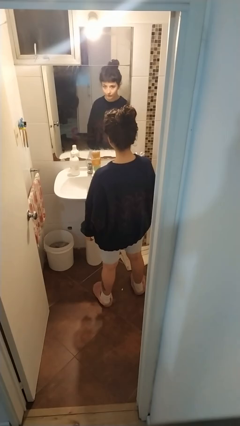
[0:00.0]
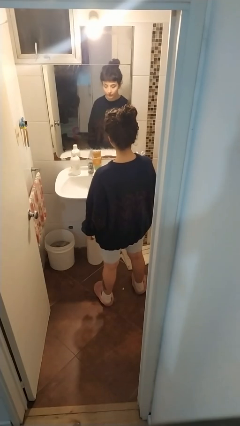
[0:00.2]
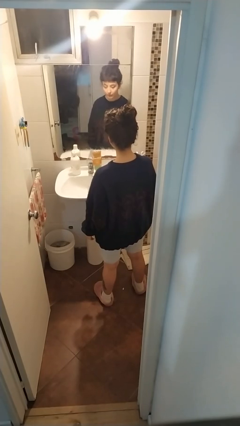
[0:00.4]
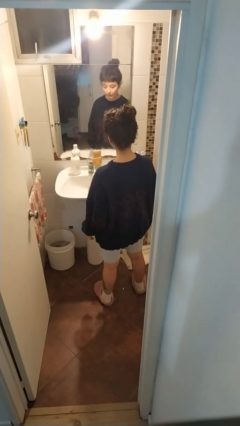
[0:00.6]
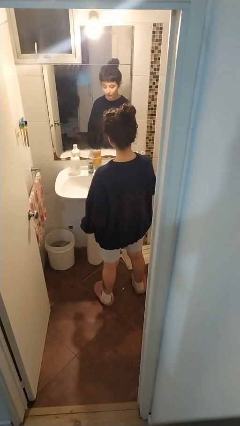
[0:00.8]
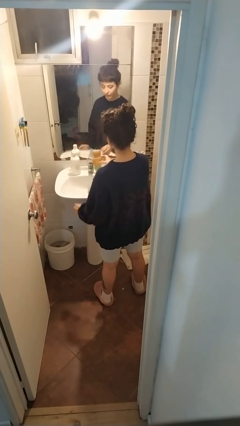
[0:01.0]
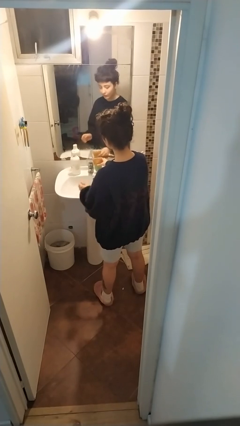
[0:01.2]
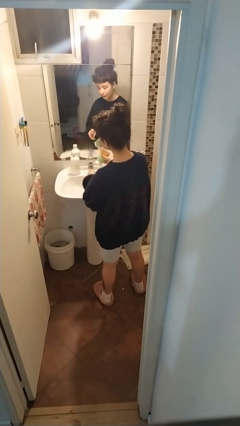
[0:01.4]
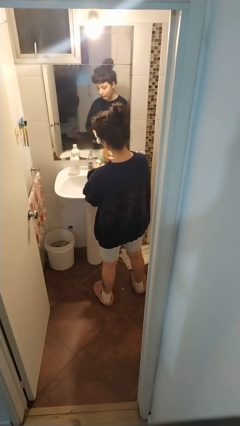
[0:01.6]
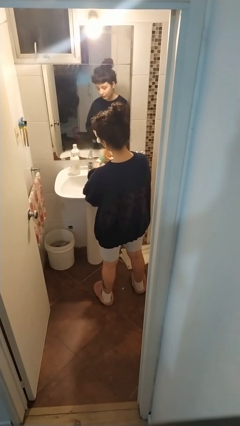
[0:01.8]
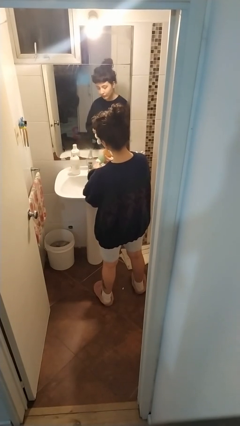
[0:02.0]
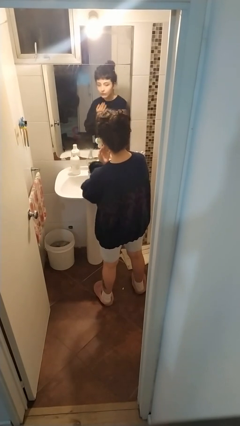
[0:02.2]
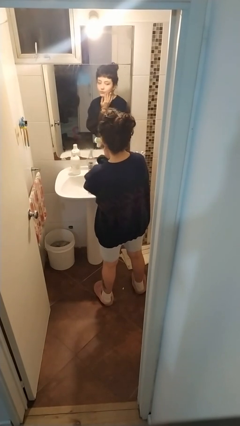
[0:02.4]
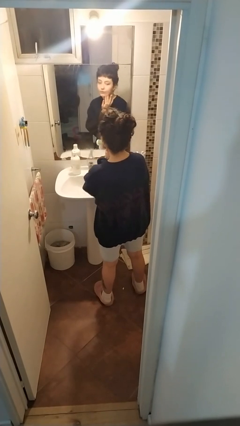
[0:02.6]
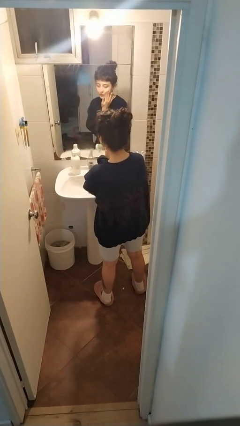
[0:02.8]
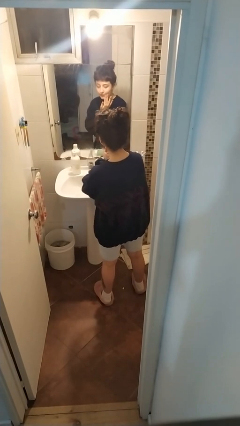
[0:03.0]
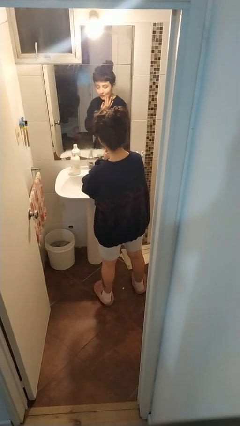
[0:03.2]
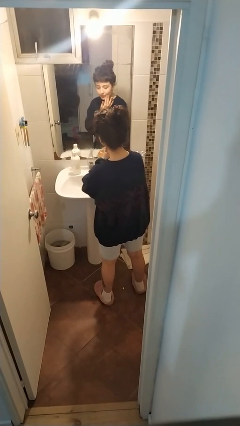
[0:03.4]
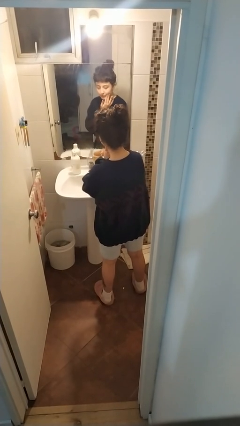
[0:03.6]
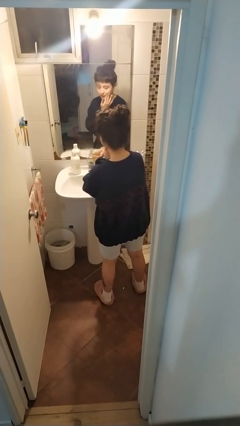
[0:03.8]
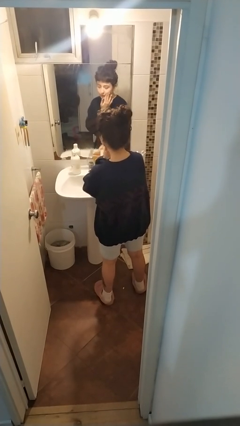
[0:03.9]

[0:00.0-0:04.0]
person applies shaving cream

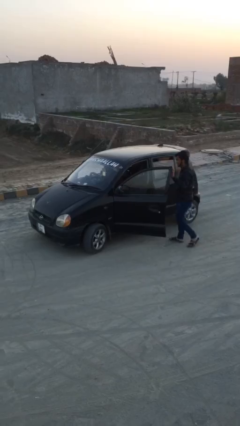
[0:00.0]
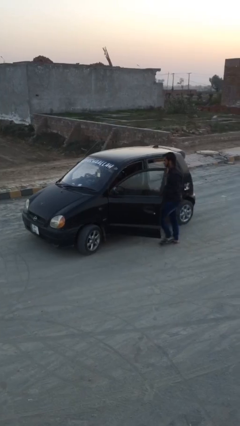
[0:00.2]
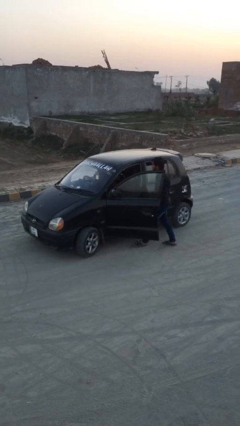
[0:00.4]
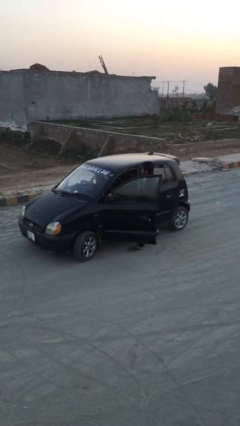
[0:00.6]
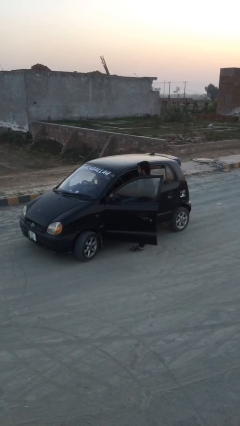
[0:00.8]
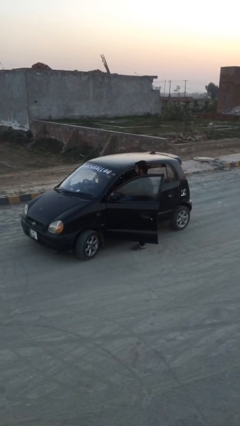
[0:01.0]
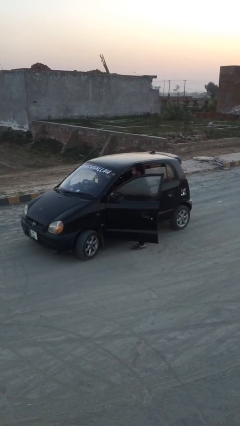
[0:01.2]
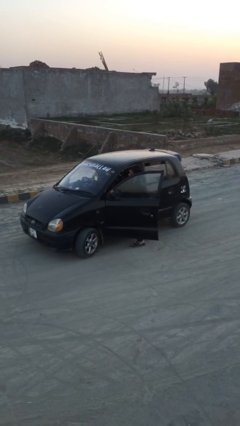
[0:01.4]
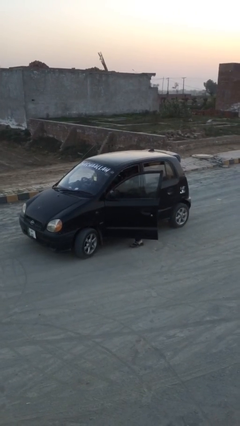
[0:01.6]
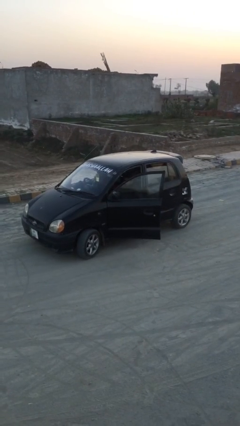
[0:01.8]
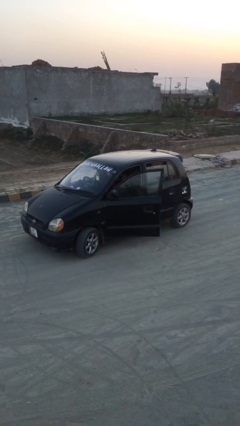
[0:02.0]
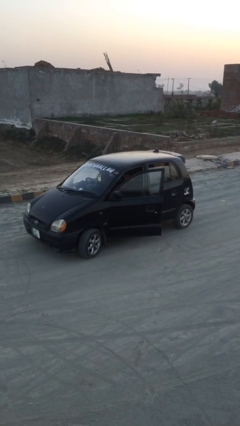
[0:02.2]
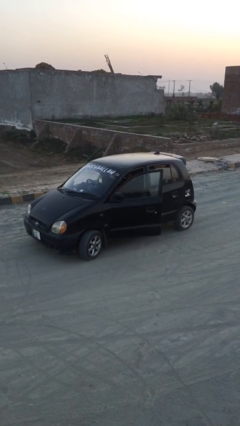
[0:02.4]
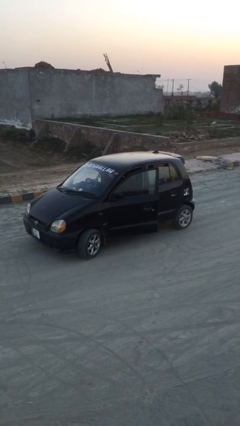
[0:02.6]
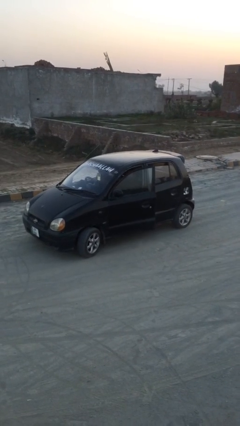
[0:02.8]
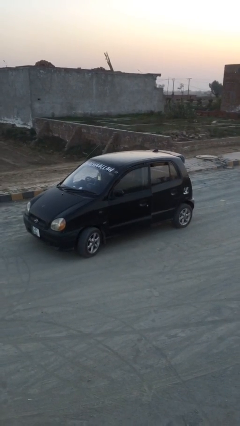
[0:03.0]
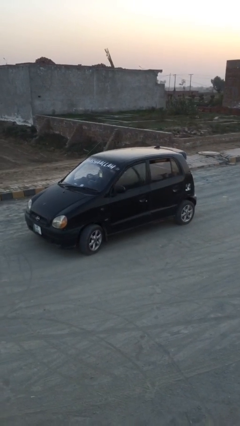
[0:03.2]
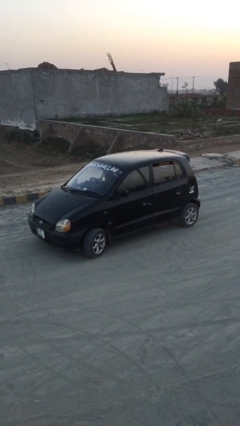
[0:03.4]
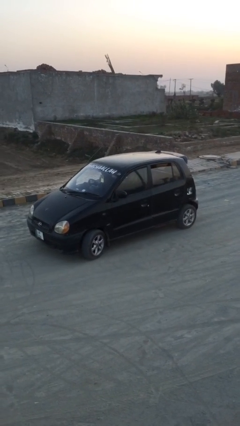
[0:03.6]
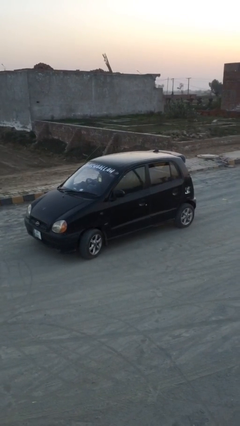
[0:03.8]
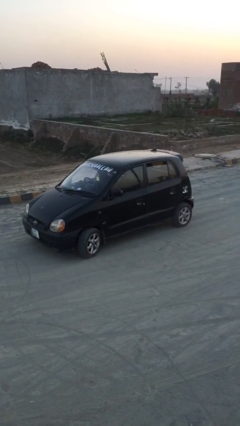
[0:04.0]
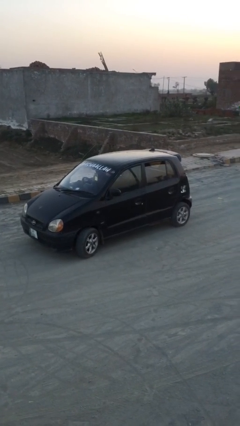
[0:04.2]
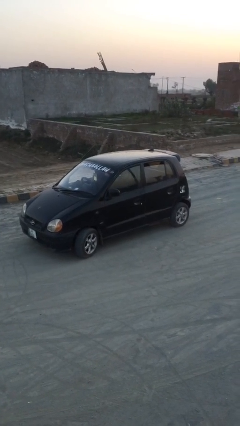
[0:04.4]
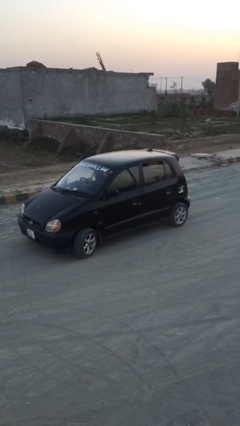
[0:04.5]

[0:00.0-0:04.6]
car picks up person

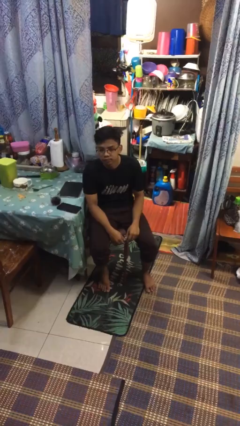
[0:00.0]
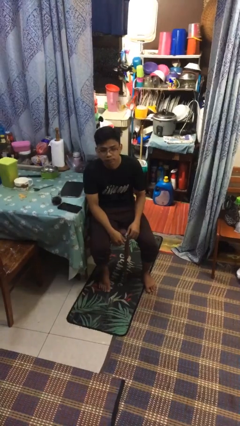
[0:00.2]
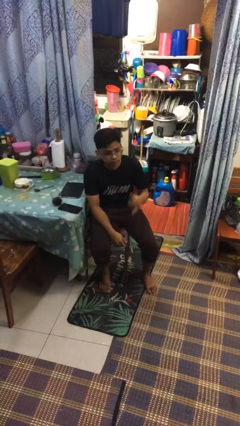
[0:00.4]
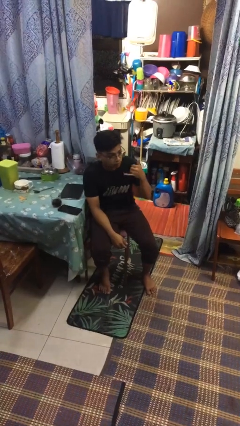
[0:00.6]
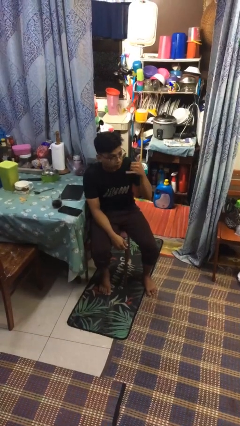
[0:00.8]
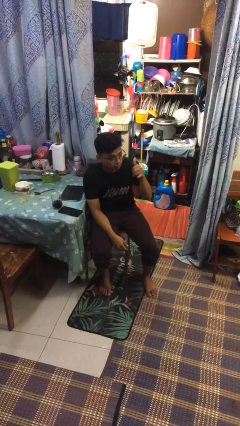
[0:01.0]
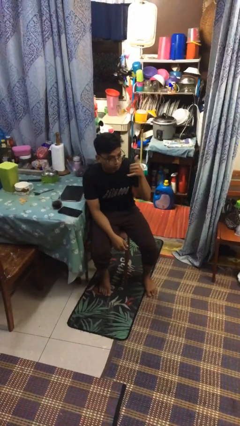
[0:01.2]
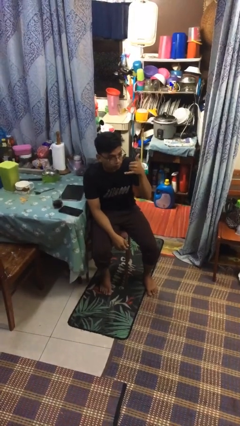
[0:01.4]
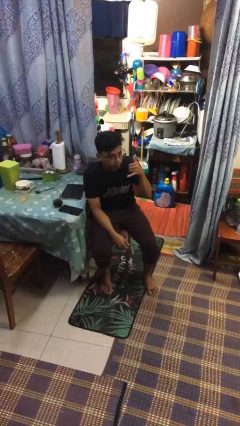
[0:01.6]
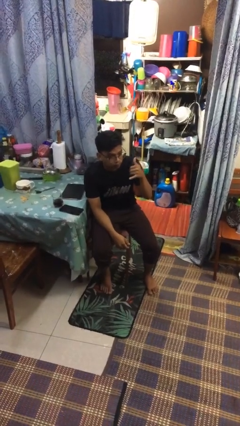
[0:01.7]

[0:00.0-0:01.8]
person gestures hang loose

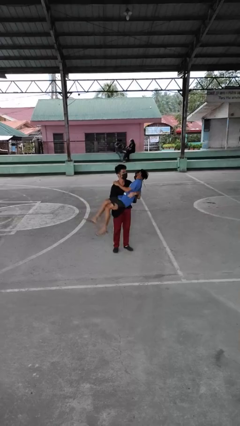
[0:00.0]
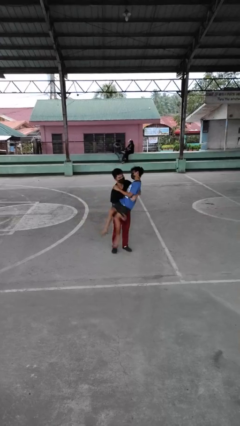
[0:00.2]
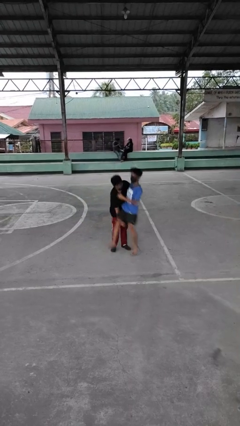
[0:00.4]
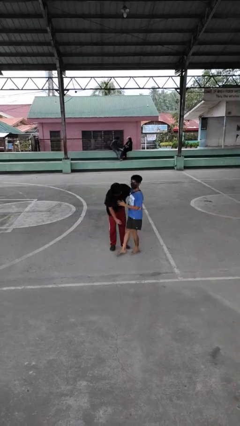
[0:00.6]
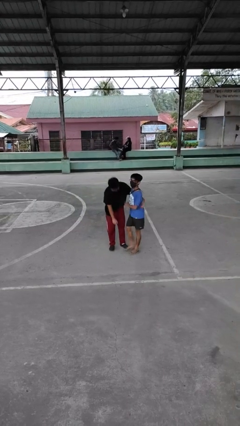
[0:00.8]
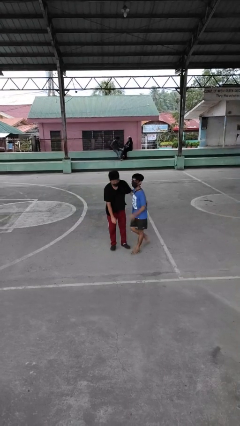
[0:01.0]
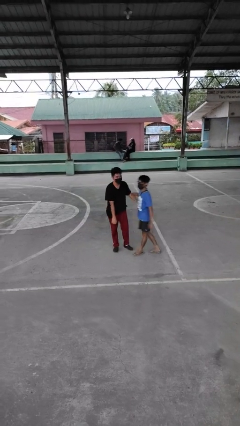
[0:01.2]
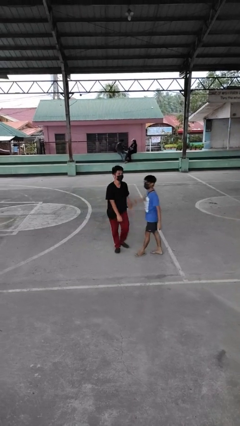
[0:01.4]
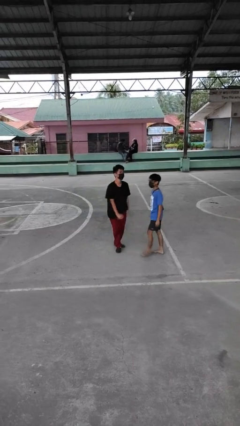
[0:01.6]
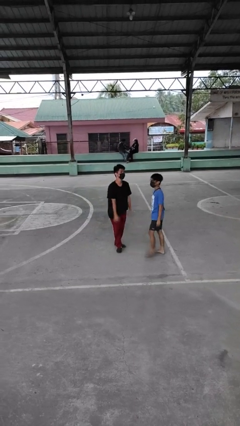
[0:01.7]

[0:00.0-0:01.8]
person puts down person

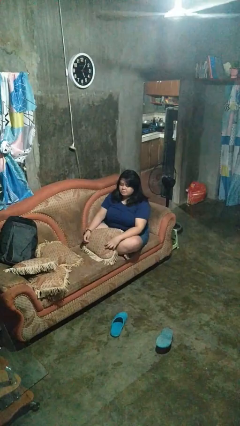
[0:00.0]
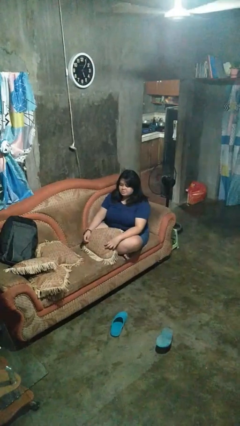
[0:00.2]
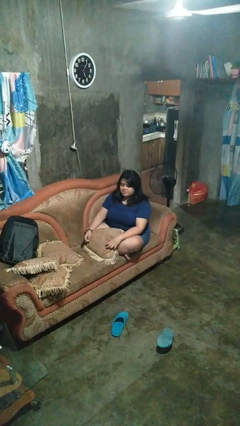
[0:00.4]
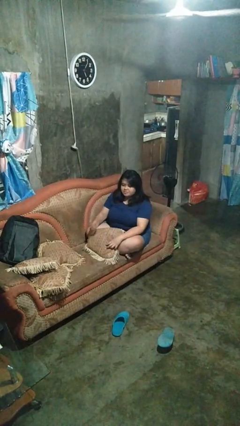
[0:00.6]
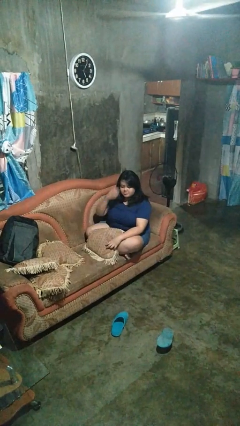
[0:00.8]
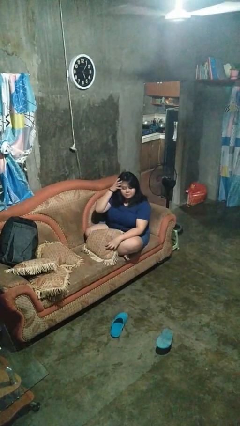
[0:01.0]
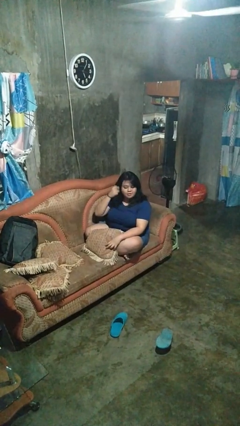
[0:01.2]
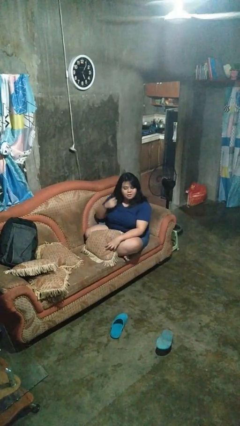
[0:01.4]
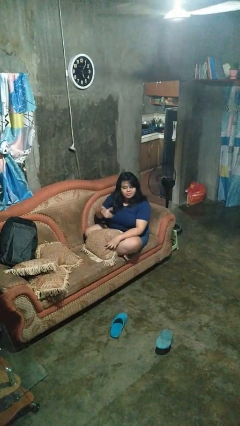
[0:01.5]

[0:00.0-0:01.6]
person strokes hair

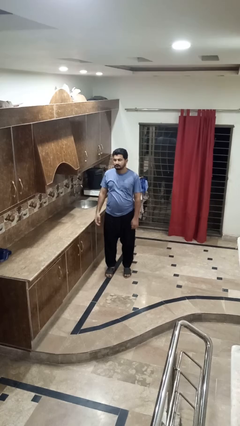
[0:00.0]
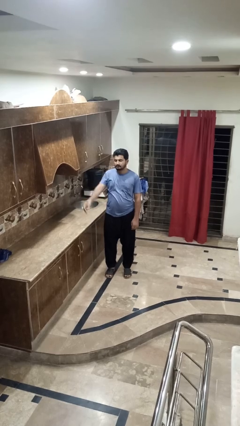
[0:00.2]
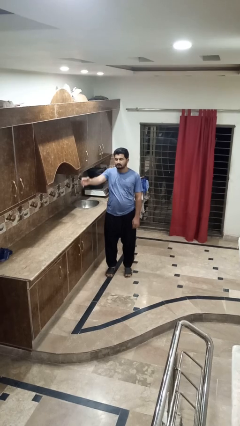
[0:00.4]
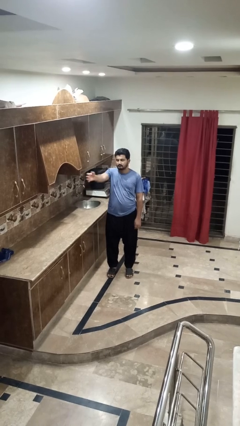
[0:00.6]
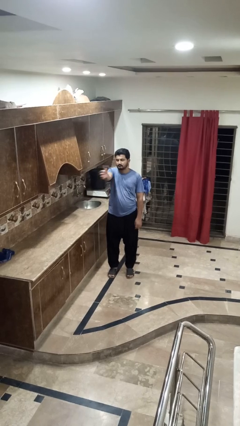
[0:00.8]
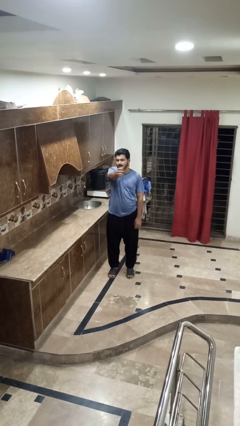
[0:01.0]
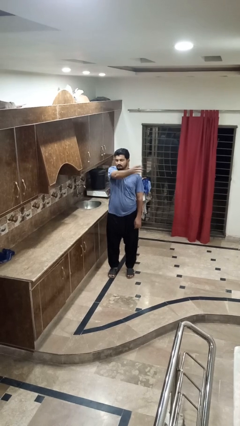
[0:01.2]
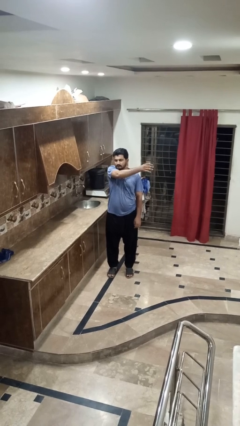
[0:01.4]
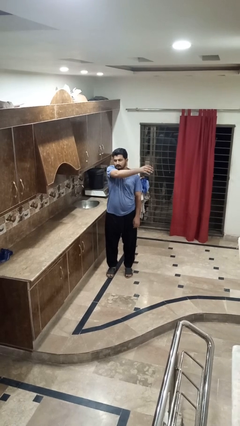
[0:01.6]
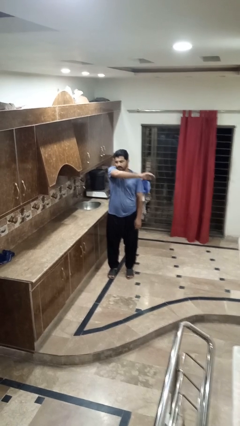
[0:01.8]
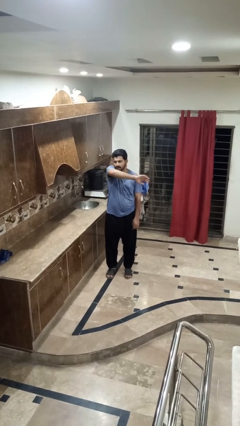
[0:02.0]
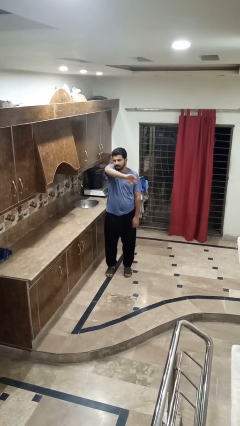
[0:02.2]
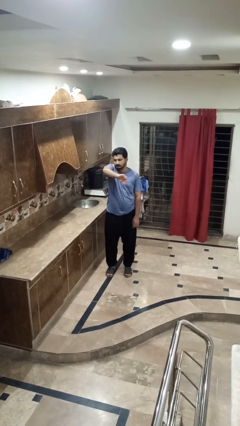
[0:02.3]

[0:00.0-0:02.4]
person gestures swipe left

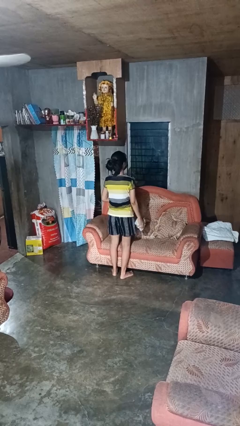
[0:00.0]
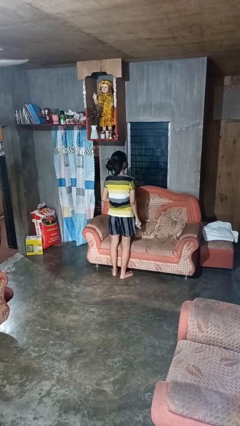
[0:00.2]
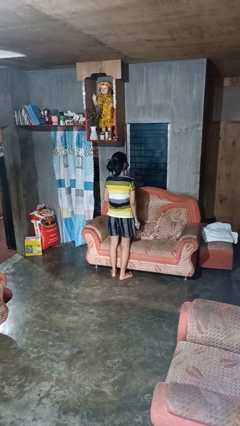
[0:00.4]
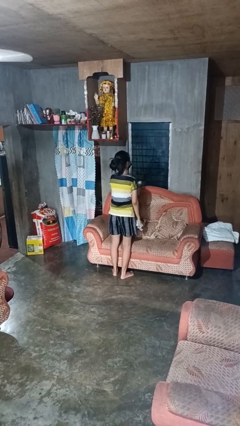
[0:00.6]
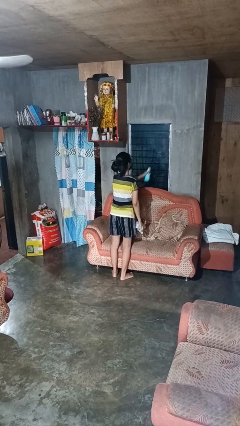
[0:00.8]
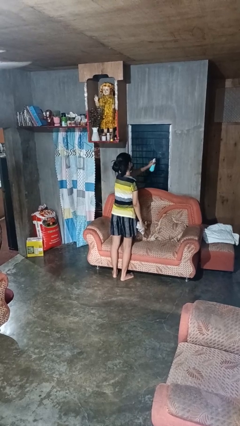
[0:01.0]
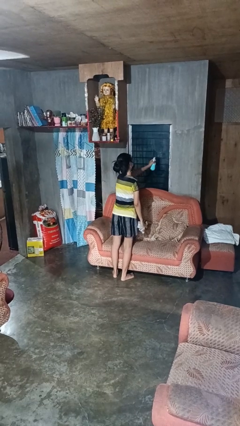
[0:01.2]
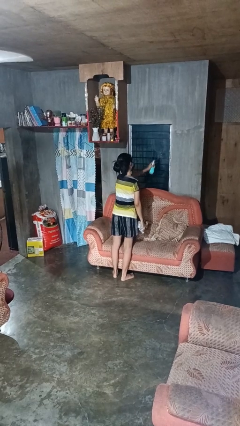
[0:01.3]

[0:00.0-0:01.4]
person sprays from bottle
